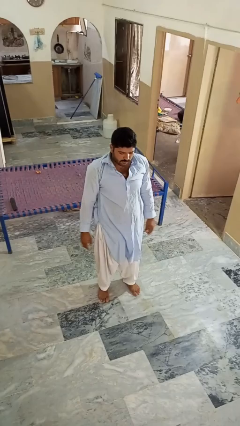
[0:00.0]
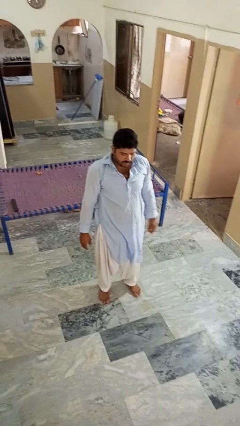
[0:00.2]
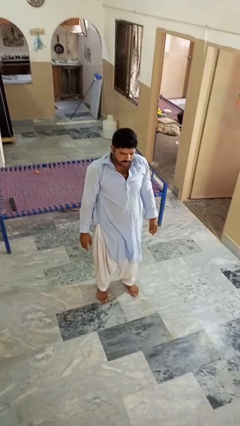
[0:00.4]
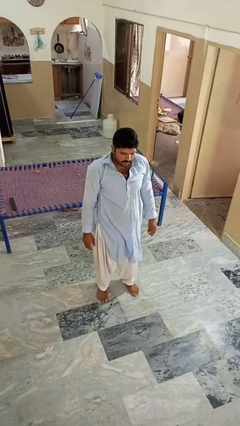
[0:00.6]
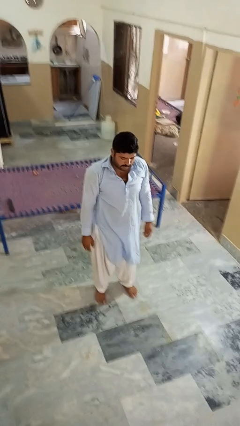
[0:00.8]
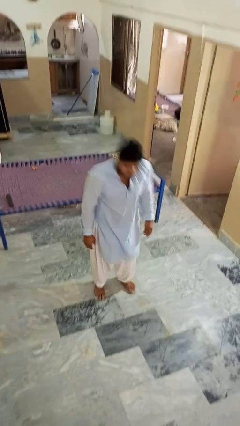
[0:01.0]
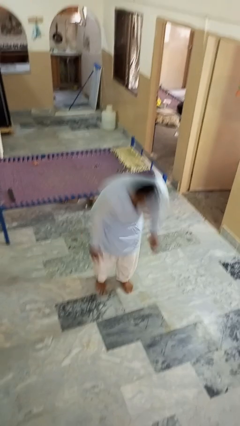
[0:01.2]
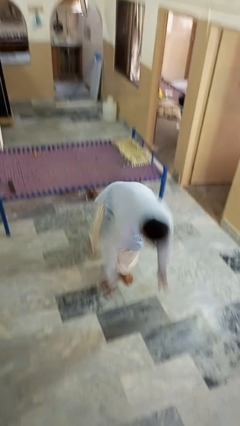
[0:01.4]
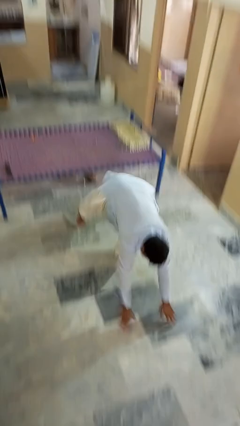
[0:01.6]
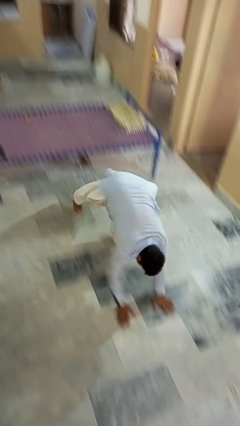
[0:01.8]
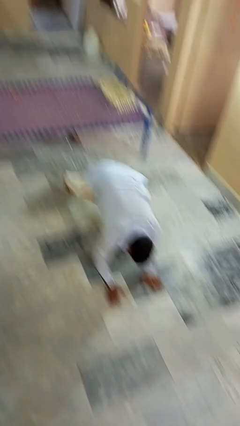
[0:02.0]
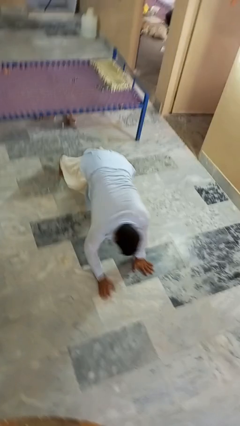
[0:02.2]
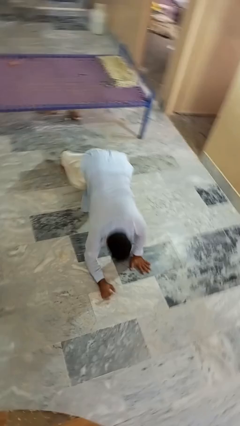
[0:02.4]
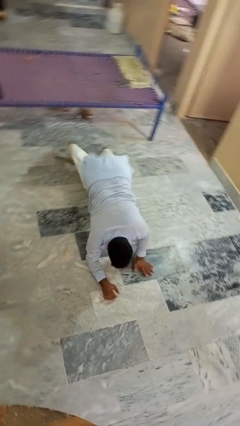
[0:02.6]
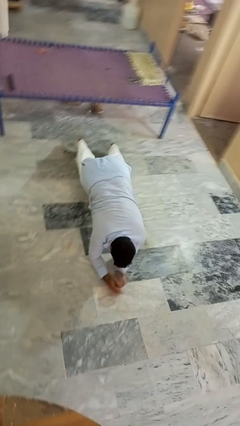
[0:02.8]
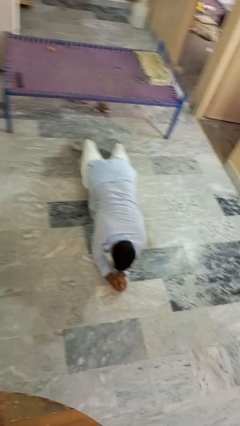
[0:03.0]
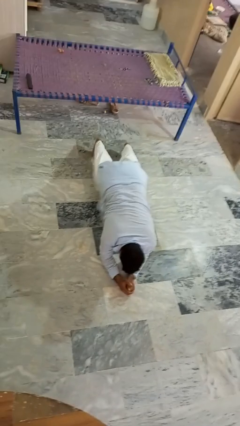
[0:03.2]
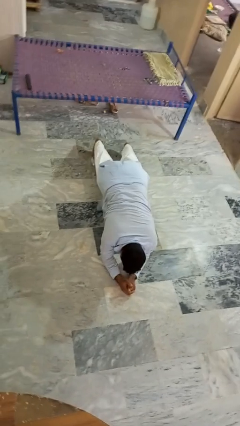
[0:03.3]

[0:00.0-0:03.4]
person exercises with plank

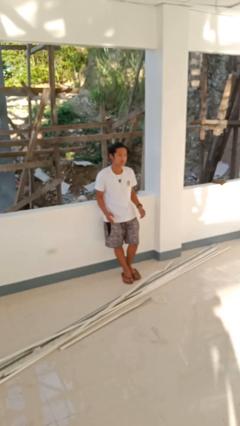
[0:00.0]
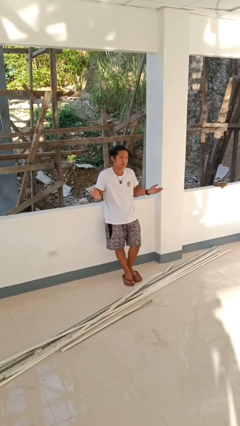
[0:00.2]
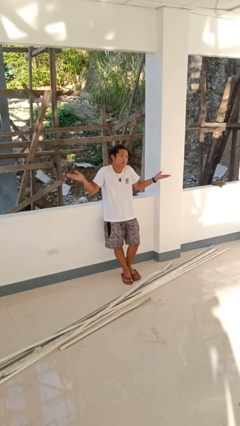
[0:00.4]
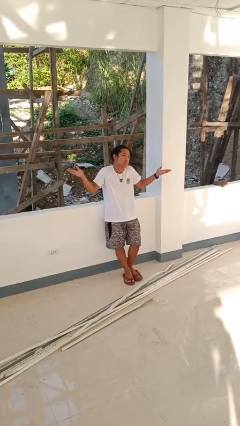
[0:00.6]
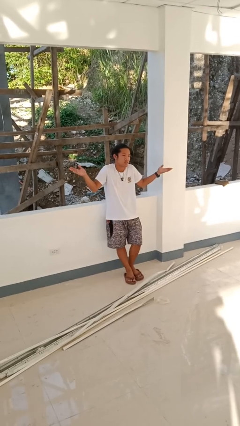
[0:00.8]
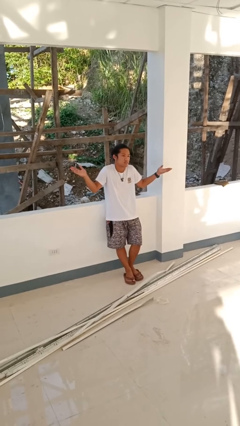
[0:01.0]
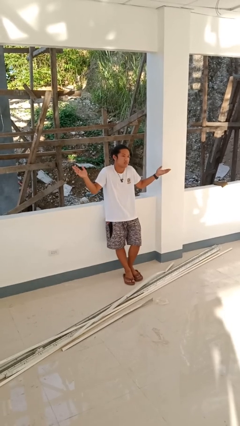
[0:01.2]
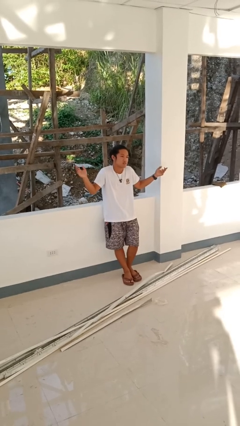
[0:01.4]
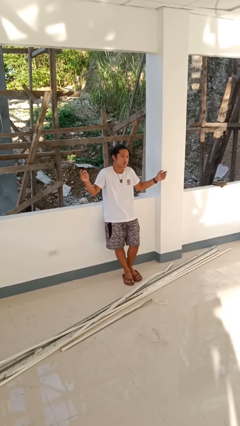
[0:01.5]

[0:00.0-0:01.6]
person shrugs

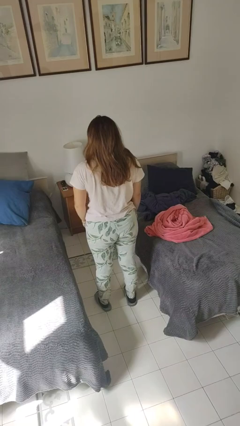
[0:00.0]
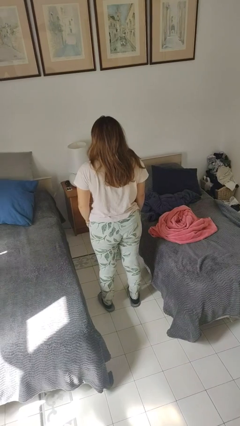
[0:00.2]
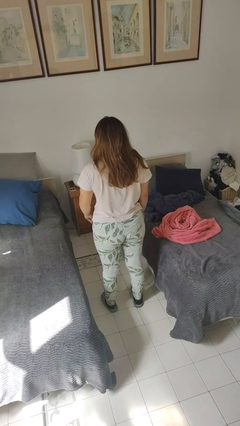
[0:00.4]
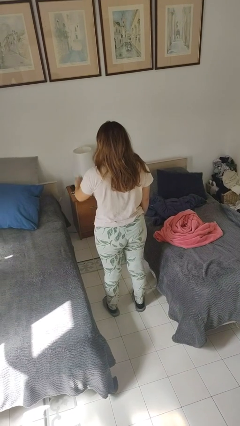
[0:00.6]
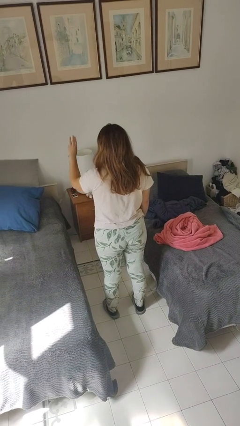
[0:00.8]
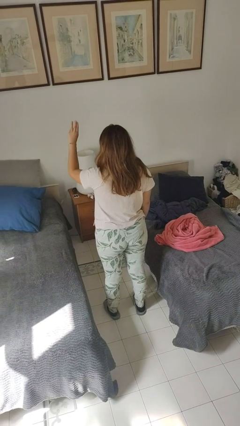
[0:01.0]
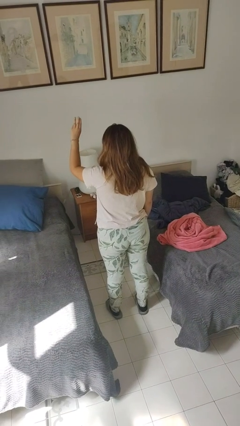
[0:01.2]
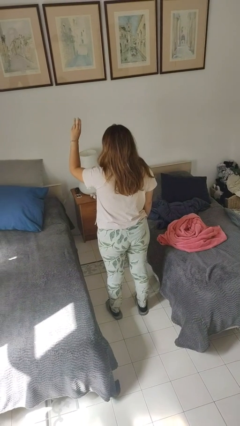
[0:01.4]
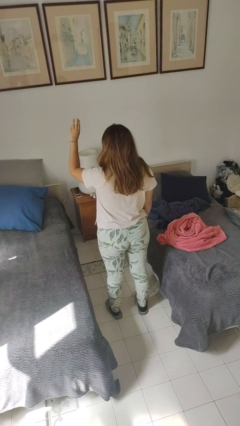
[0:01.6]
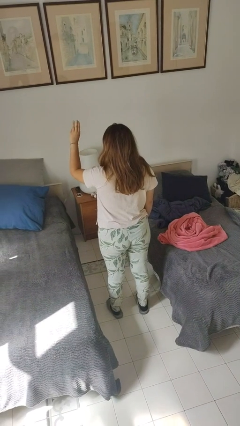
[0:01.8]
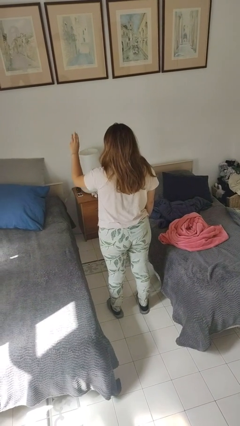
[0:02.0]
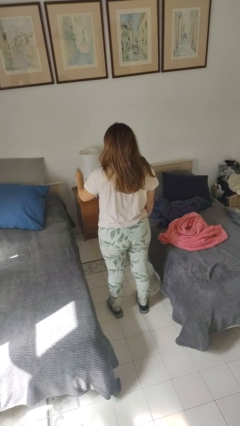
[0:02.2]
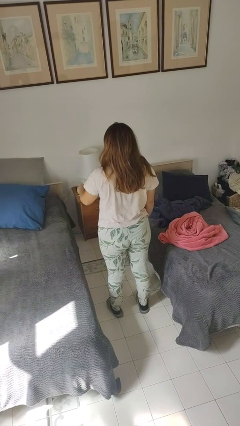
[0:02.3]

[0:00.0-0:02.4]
person gestures number three

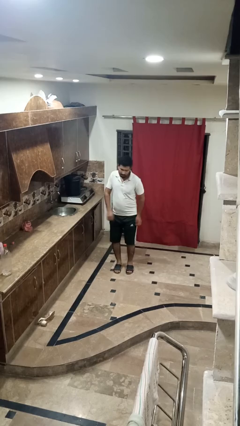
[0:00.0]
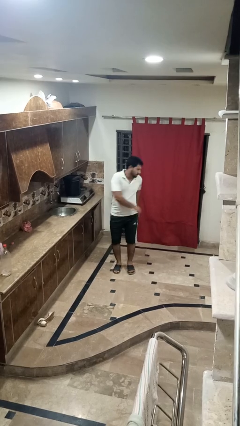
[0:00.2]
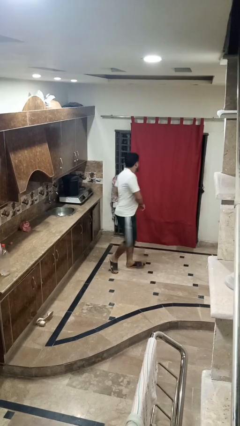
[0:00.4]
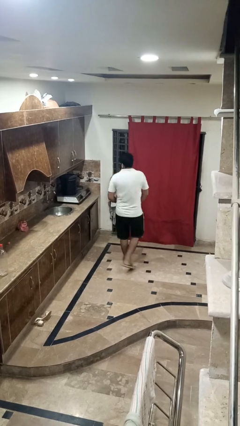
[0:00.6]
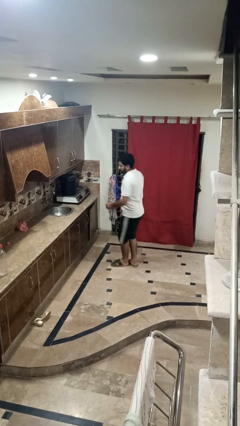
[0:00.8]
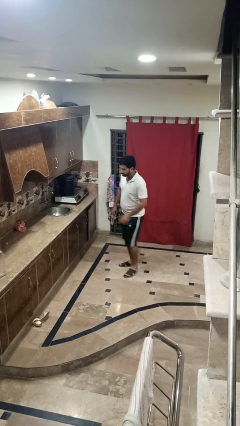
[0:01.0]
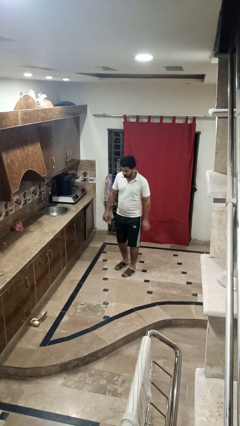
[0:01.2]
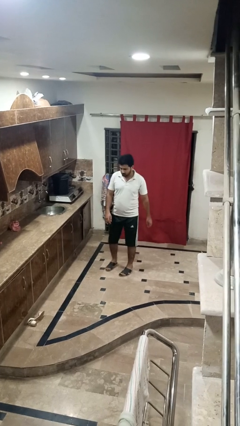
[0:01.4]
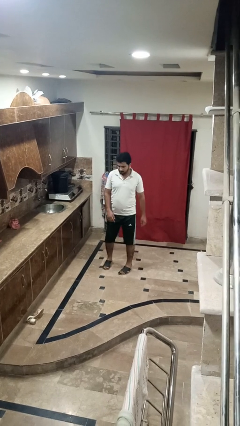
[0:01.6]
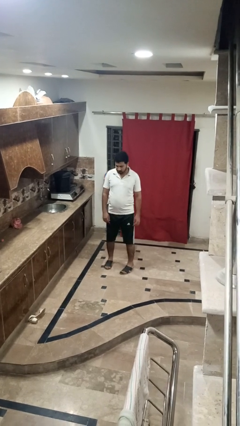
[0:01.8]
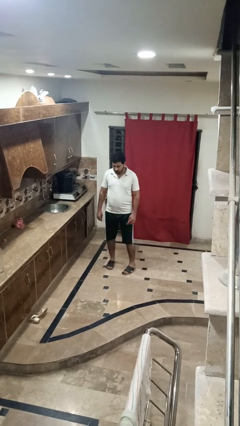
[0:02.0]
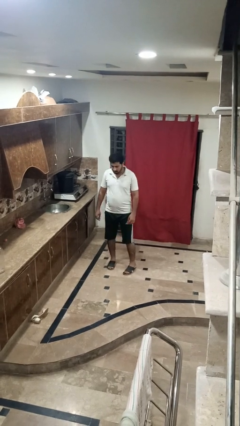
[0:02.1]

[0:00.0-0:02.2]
person twirls

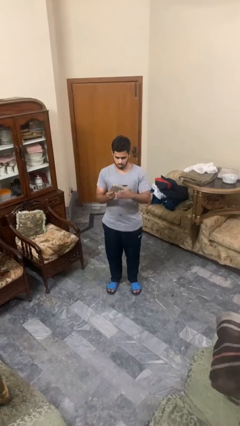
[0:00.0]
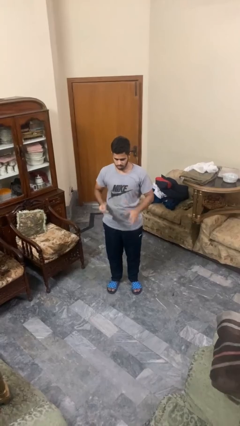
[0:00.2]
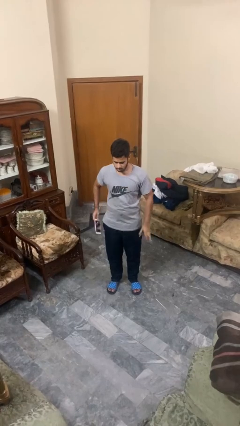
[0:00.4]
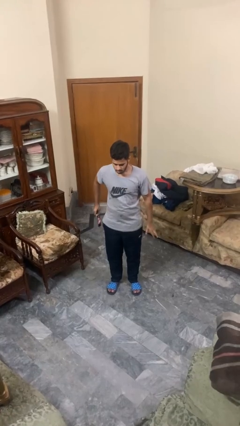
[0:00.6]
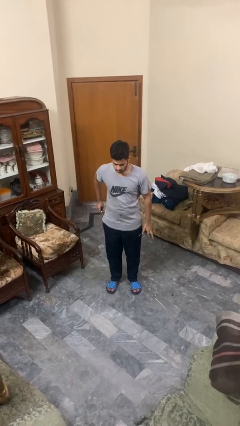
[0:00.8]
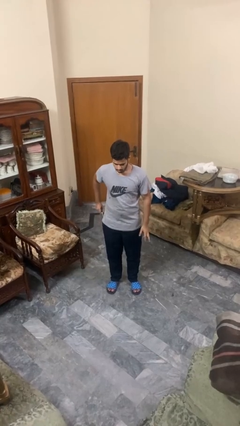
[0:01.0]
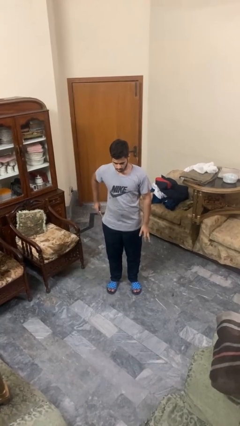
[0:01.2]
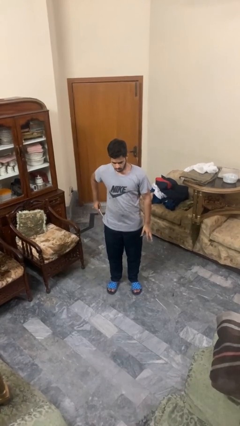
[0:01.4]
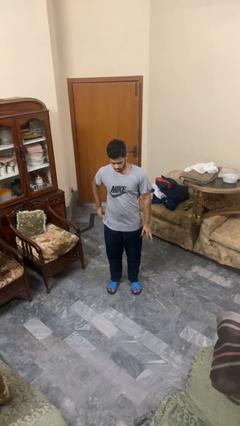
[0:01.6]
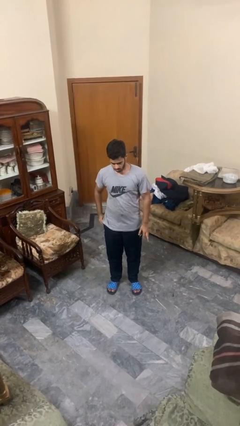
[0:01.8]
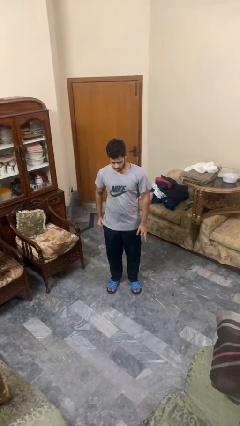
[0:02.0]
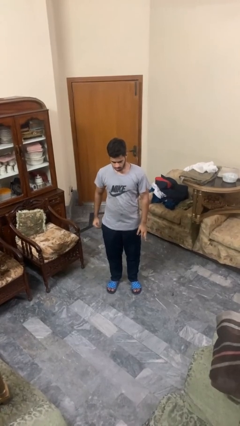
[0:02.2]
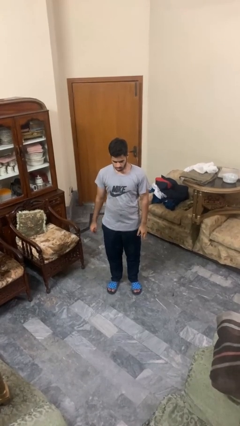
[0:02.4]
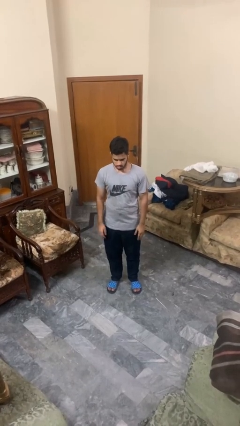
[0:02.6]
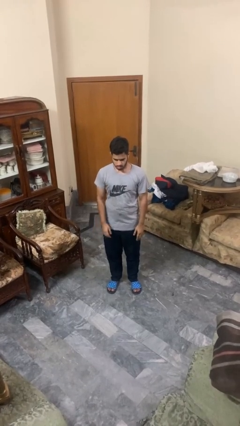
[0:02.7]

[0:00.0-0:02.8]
person puts phone into pocket

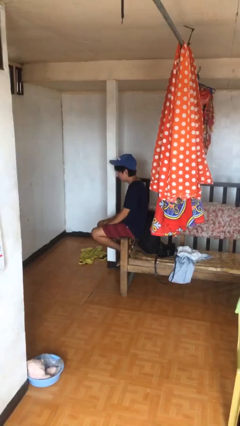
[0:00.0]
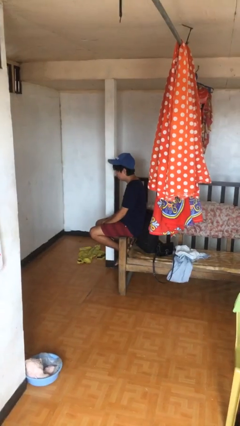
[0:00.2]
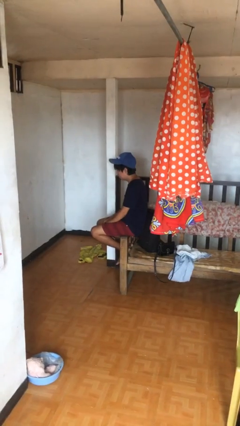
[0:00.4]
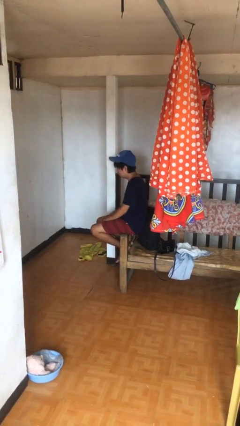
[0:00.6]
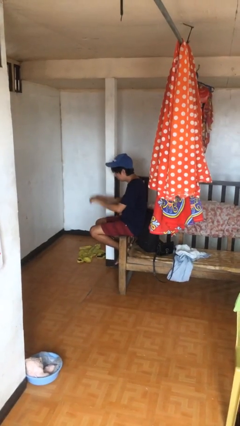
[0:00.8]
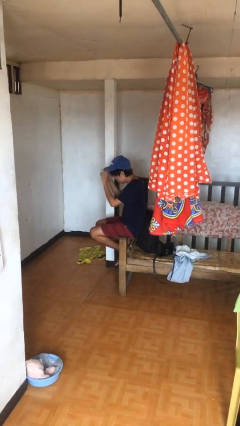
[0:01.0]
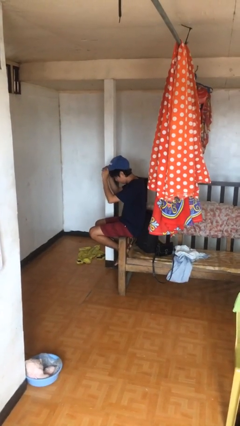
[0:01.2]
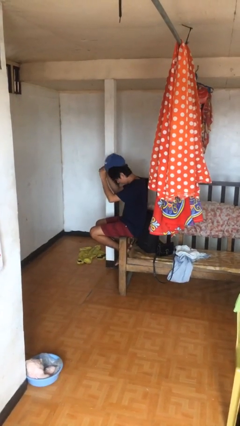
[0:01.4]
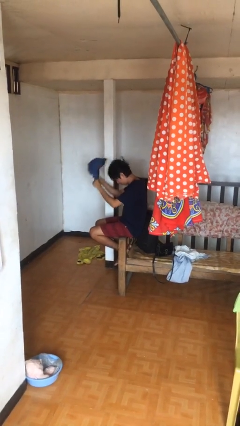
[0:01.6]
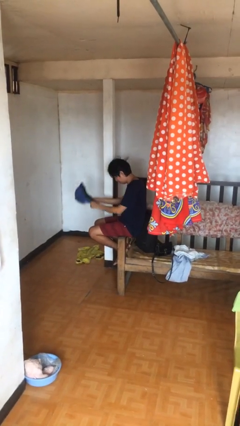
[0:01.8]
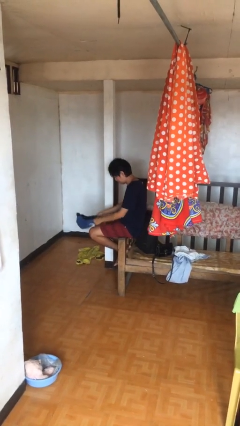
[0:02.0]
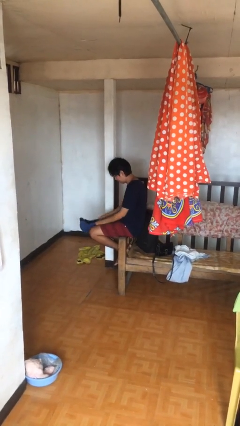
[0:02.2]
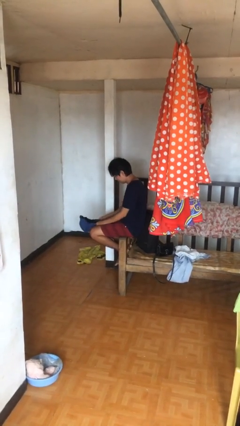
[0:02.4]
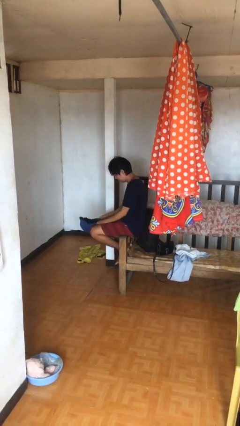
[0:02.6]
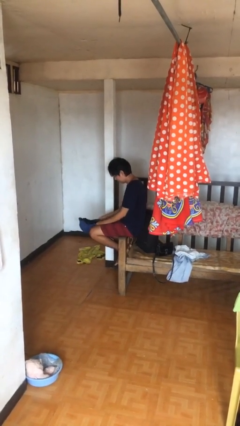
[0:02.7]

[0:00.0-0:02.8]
person takes off hat

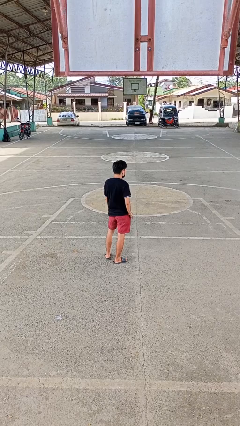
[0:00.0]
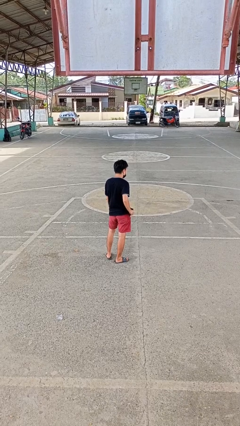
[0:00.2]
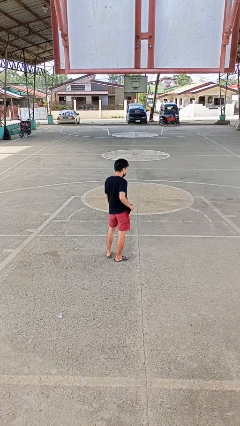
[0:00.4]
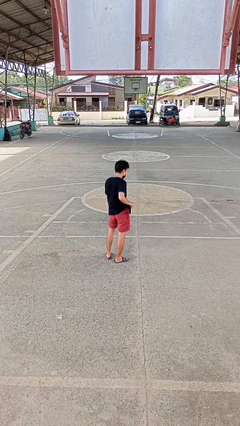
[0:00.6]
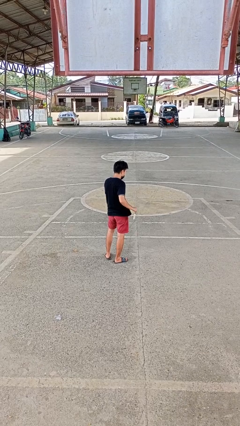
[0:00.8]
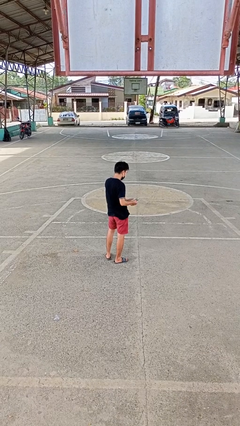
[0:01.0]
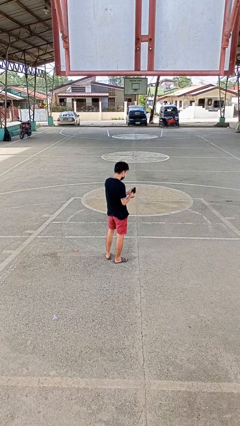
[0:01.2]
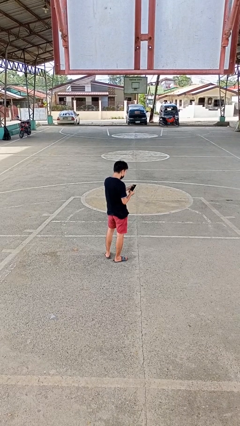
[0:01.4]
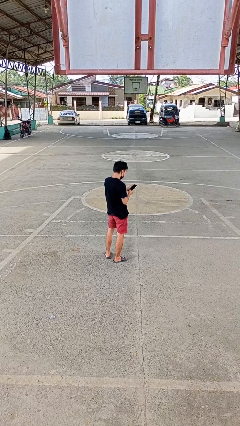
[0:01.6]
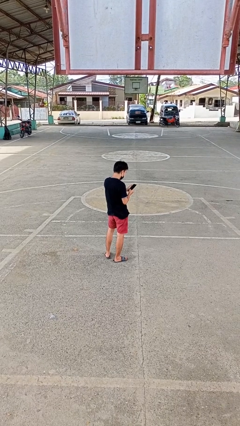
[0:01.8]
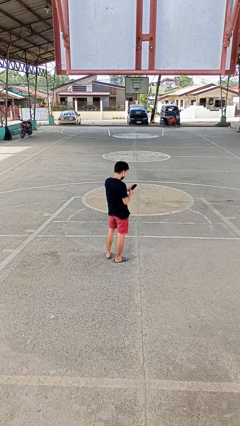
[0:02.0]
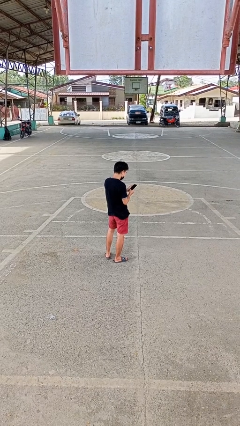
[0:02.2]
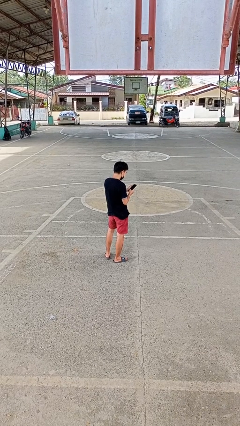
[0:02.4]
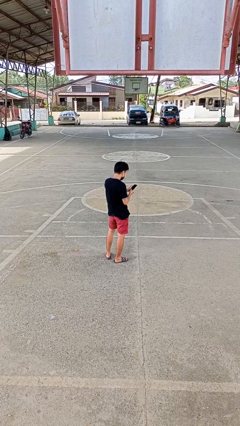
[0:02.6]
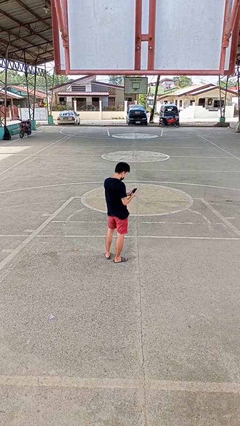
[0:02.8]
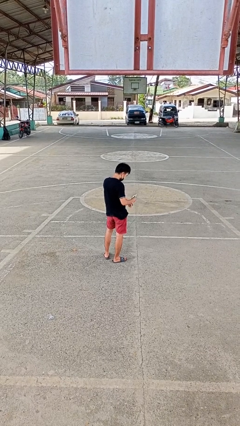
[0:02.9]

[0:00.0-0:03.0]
person takes phone from pocket
